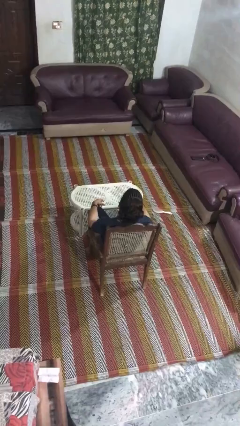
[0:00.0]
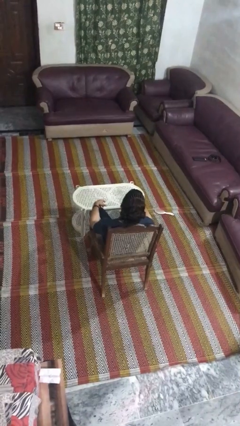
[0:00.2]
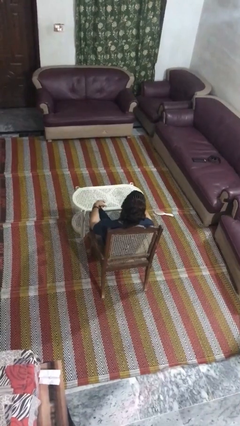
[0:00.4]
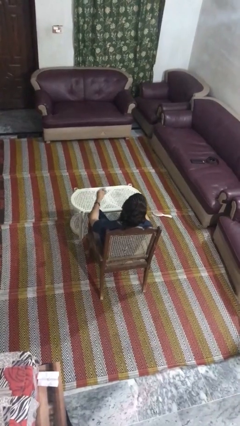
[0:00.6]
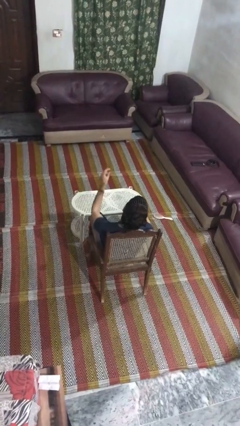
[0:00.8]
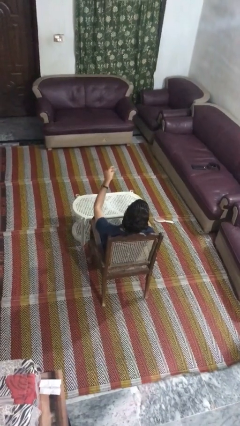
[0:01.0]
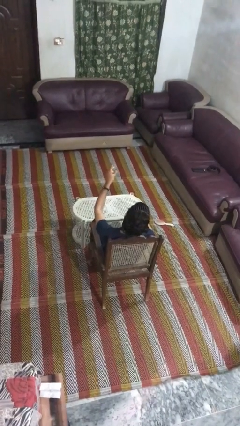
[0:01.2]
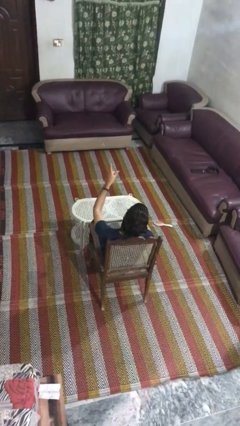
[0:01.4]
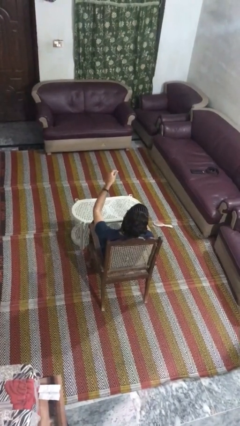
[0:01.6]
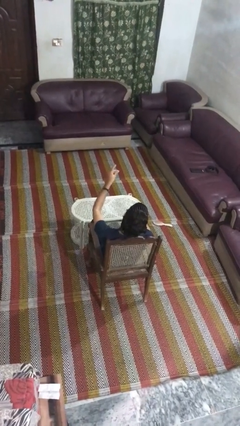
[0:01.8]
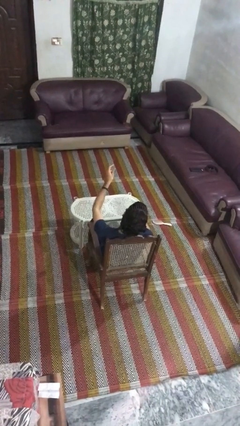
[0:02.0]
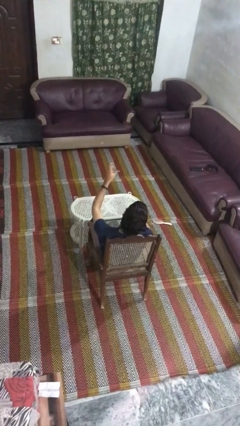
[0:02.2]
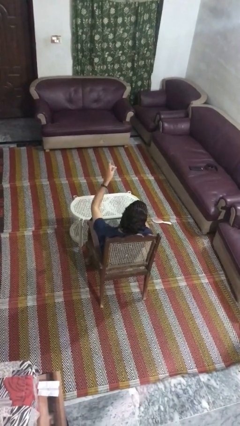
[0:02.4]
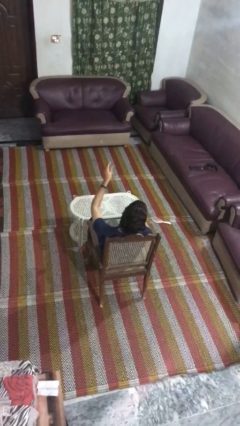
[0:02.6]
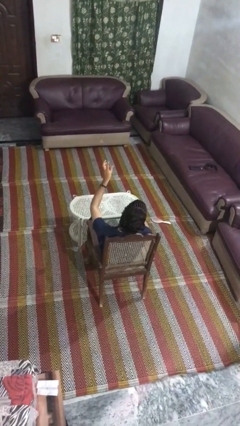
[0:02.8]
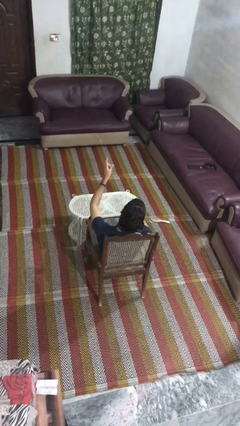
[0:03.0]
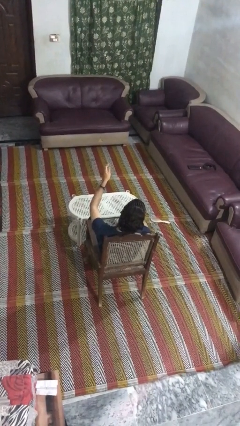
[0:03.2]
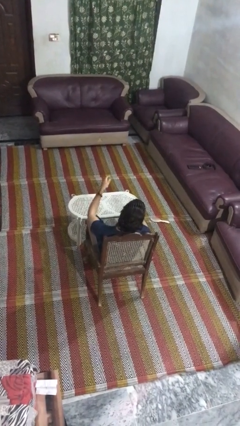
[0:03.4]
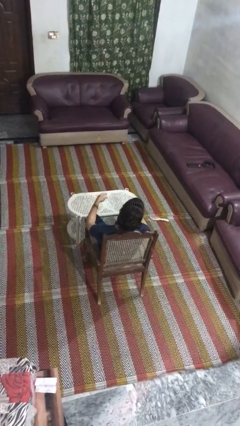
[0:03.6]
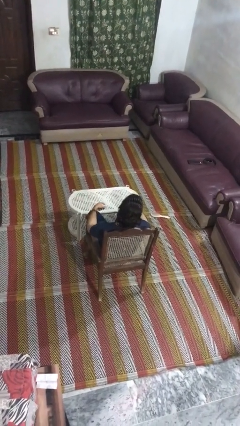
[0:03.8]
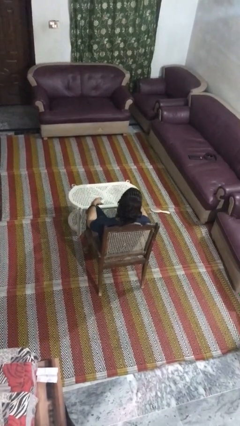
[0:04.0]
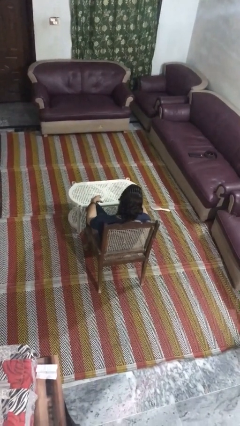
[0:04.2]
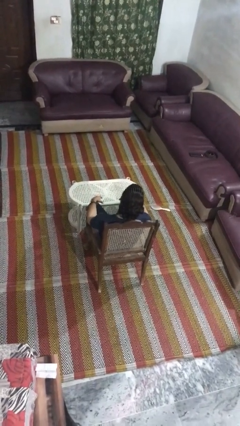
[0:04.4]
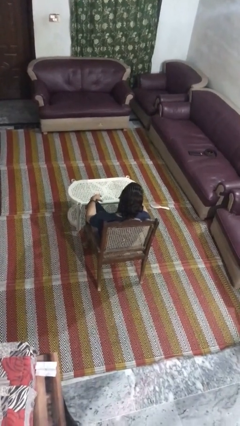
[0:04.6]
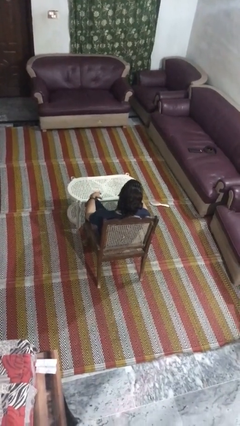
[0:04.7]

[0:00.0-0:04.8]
person snaps fingers

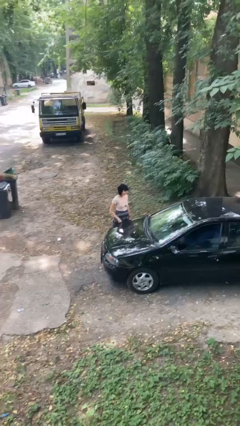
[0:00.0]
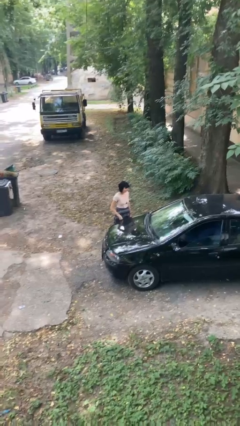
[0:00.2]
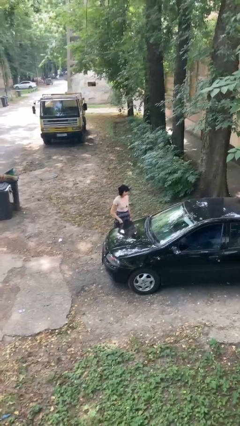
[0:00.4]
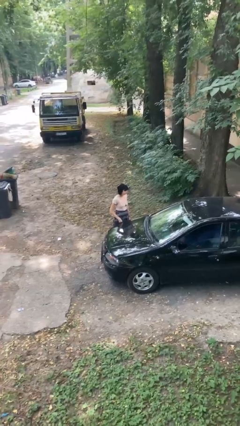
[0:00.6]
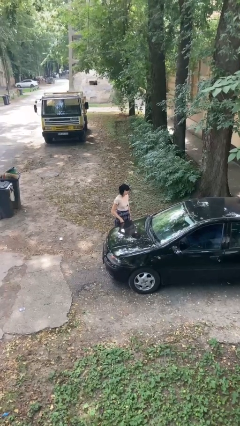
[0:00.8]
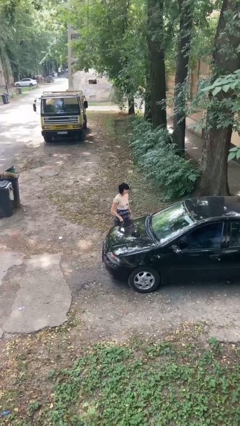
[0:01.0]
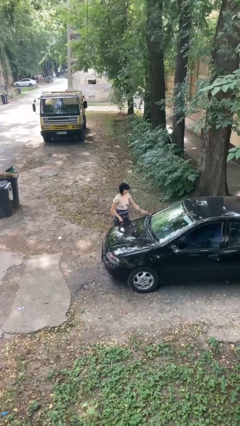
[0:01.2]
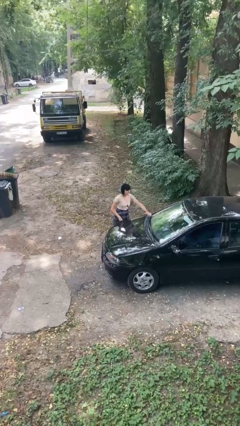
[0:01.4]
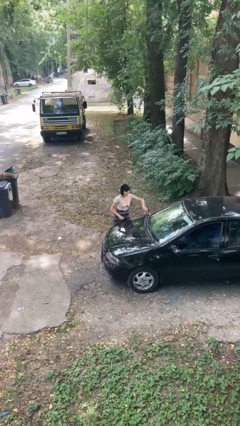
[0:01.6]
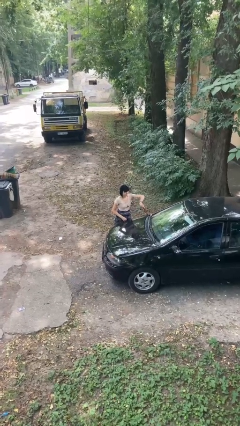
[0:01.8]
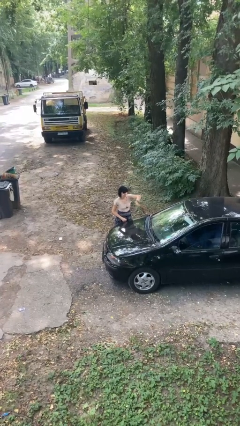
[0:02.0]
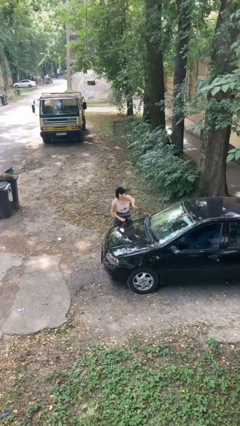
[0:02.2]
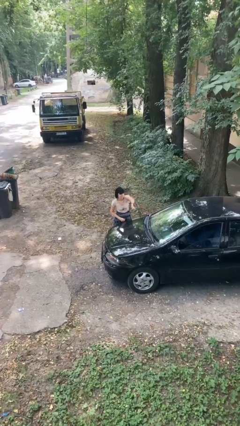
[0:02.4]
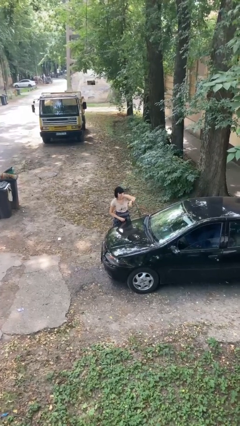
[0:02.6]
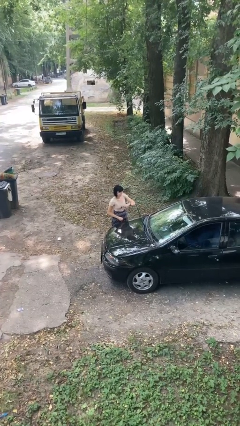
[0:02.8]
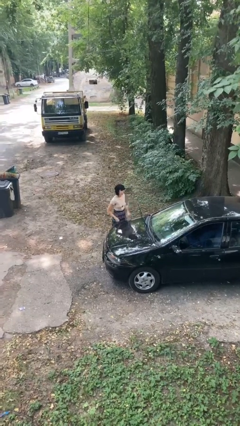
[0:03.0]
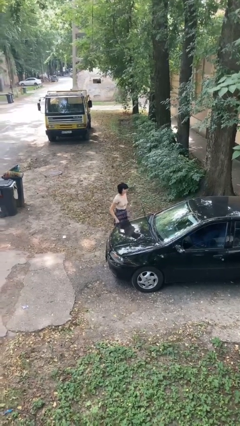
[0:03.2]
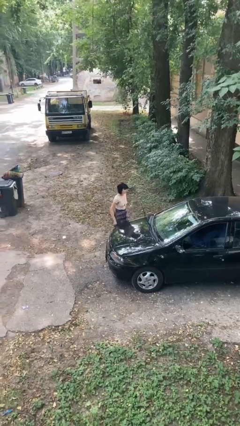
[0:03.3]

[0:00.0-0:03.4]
person flips up car wipers

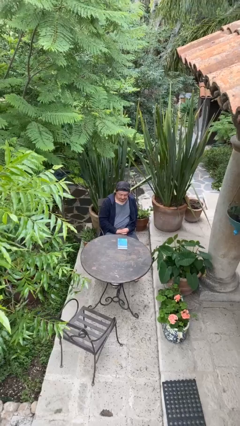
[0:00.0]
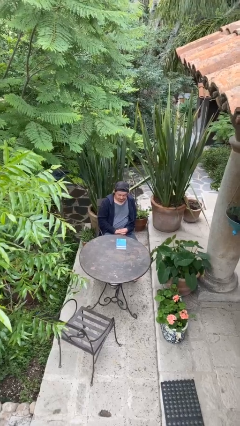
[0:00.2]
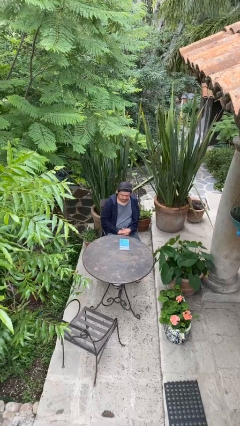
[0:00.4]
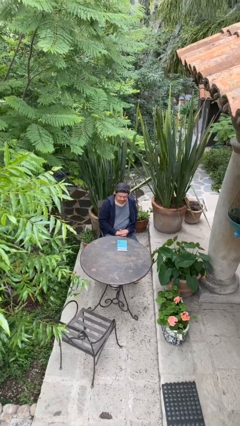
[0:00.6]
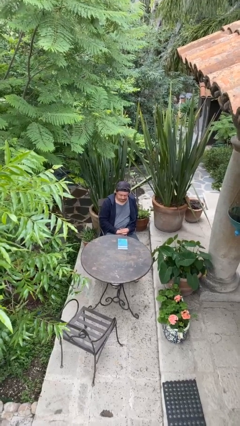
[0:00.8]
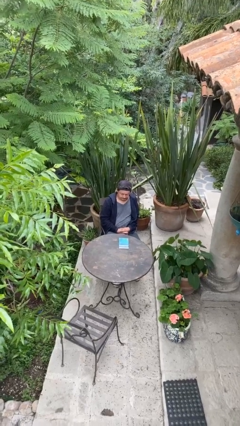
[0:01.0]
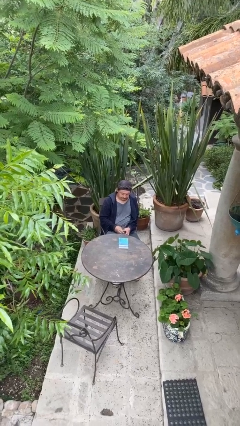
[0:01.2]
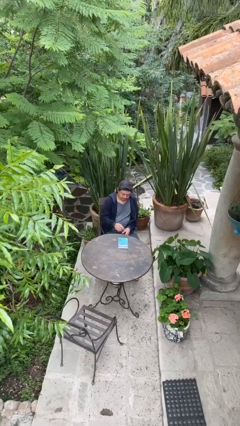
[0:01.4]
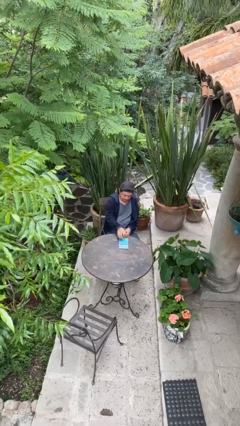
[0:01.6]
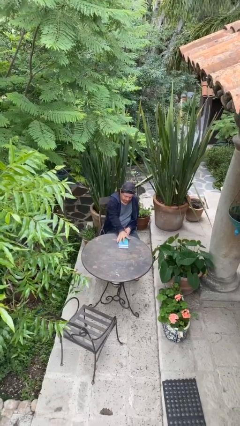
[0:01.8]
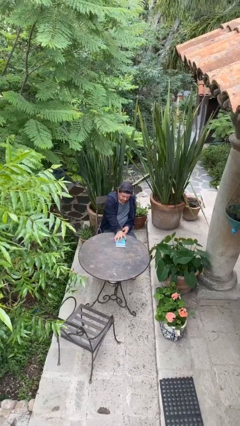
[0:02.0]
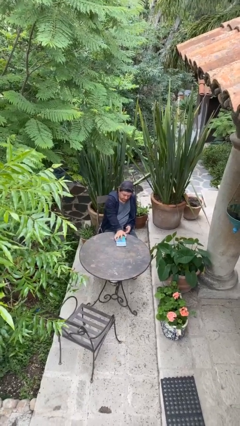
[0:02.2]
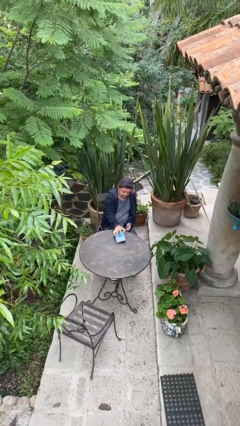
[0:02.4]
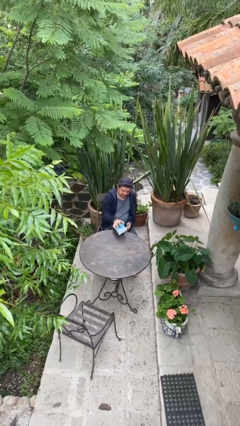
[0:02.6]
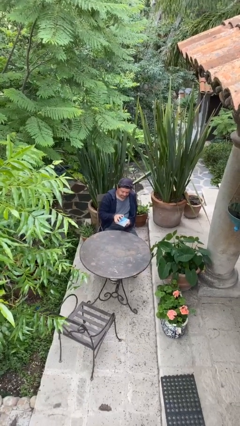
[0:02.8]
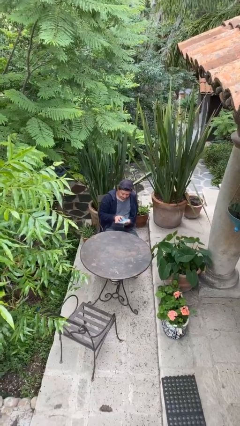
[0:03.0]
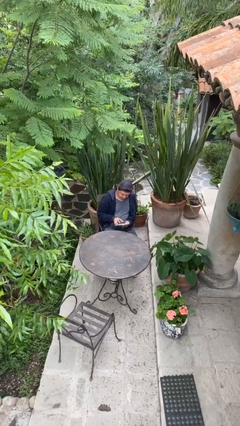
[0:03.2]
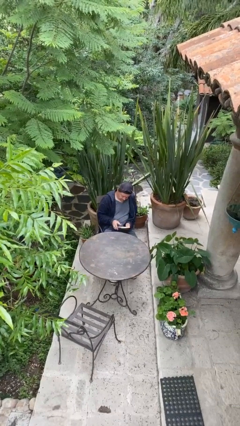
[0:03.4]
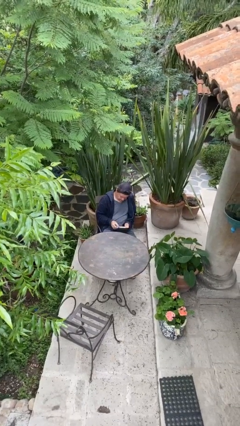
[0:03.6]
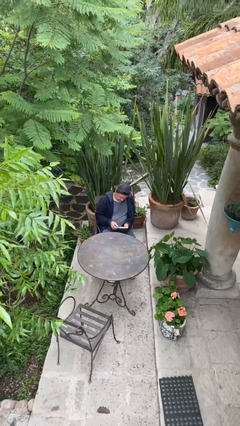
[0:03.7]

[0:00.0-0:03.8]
person picks up object from table

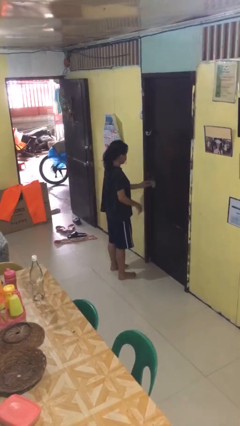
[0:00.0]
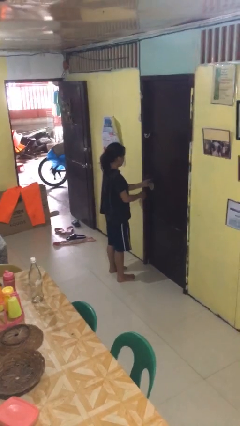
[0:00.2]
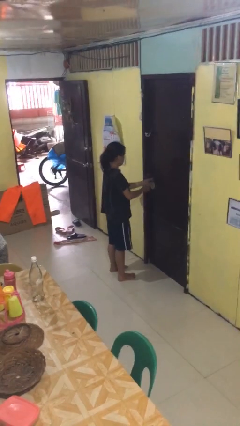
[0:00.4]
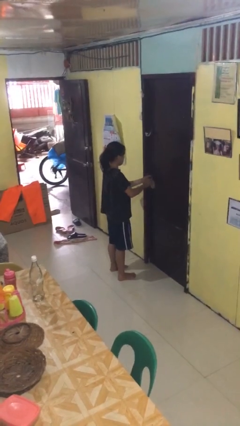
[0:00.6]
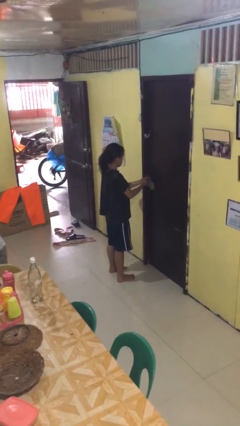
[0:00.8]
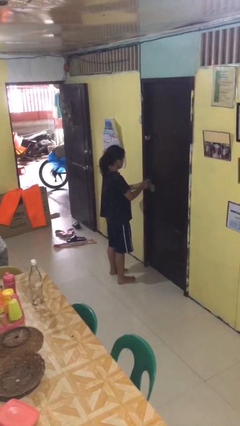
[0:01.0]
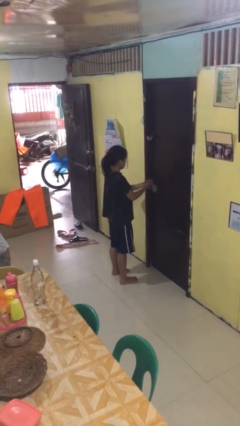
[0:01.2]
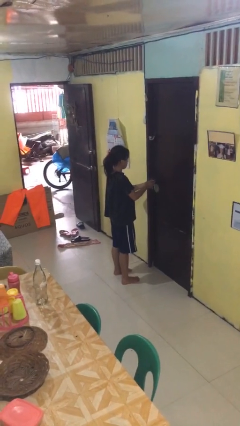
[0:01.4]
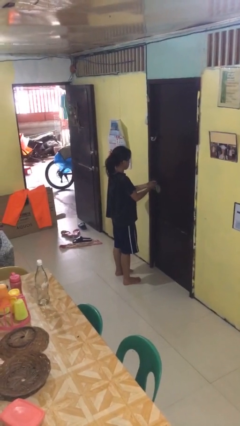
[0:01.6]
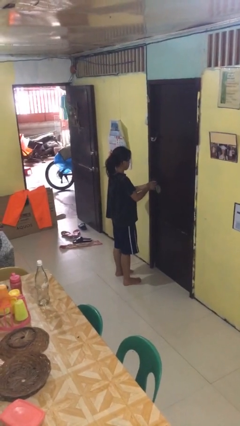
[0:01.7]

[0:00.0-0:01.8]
person unlocks door with keys

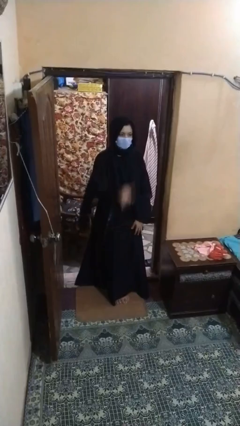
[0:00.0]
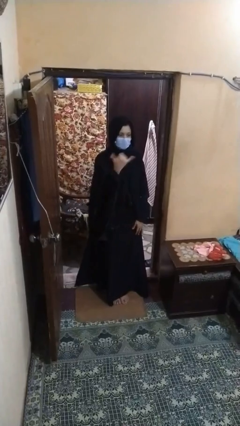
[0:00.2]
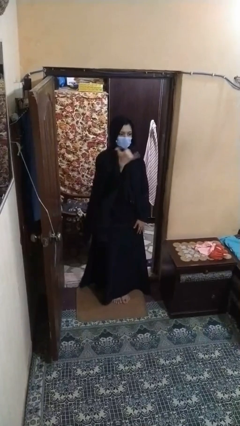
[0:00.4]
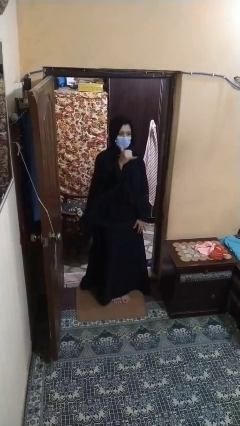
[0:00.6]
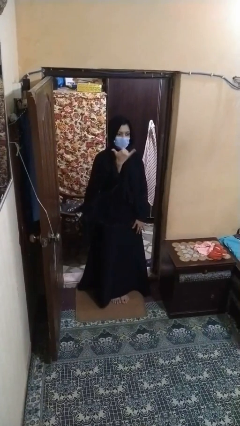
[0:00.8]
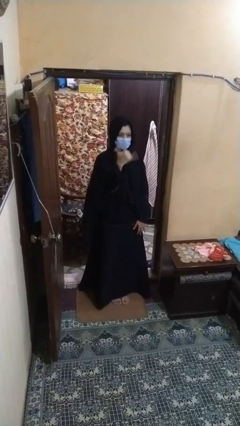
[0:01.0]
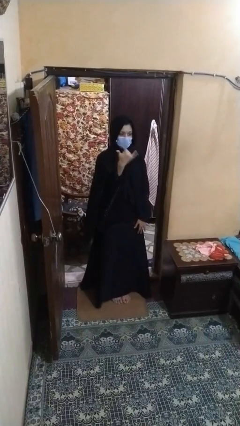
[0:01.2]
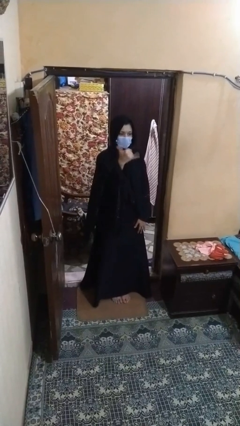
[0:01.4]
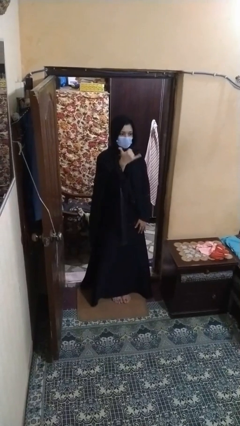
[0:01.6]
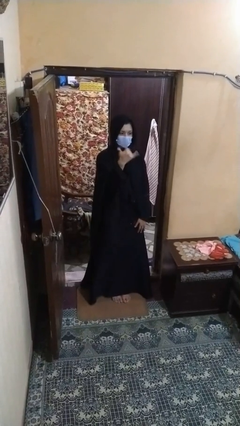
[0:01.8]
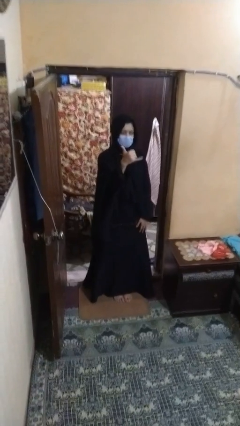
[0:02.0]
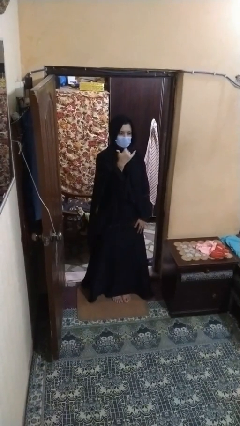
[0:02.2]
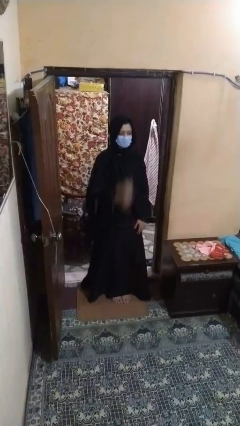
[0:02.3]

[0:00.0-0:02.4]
person gestures hang loose

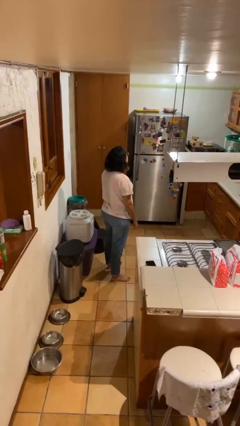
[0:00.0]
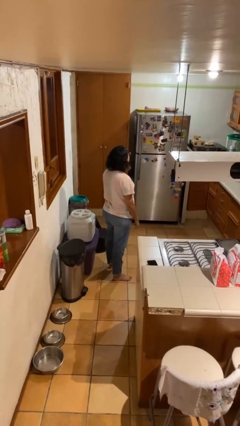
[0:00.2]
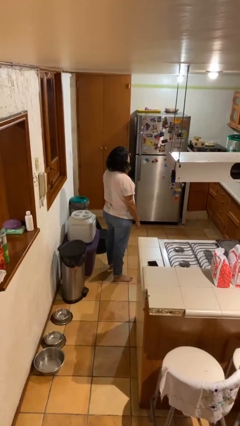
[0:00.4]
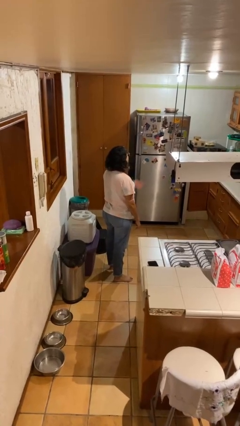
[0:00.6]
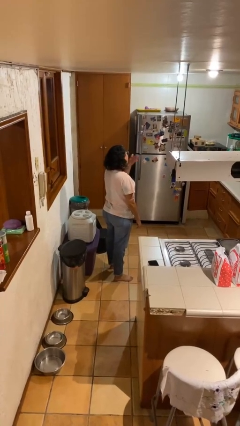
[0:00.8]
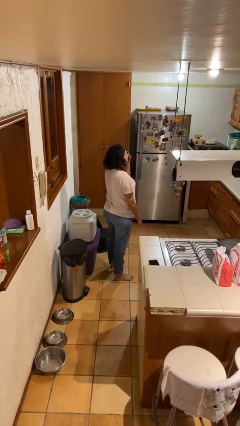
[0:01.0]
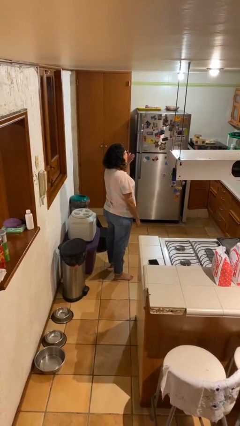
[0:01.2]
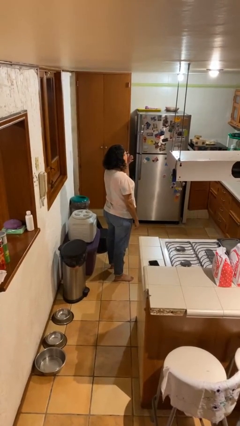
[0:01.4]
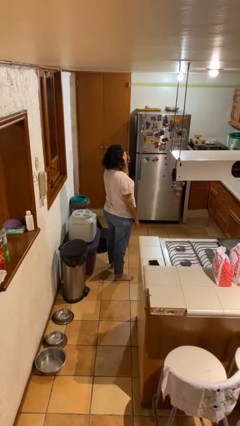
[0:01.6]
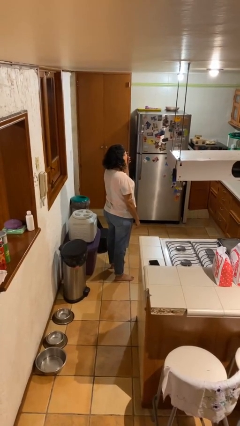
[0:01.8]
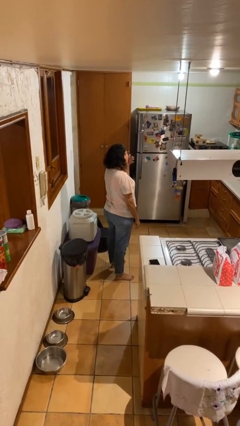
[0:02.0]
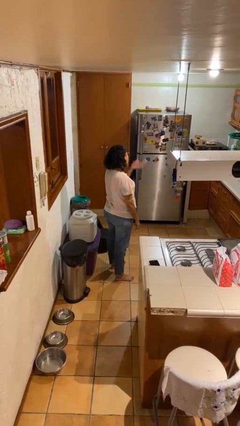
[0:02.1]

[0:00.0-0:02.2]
person yawns
